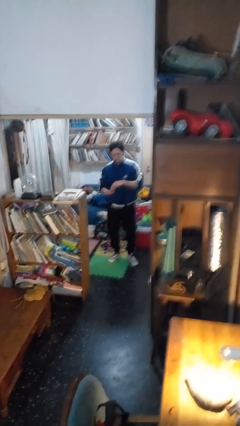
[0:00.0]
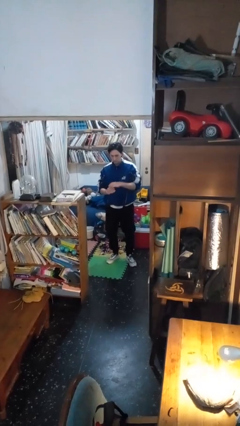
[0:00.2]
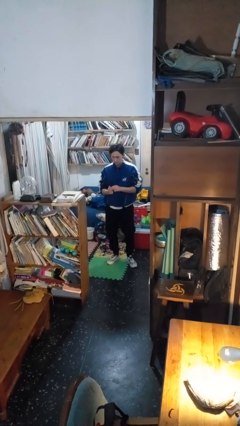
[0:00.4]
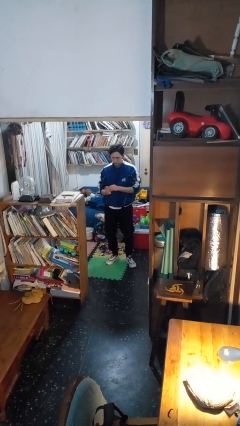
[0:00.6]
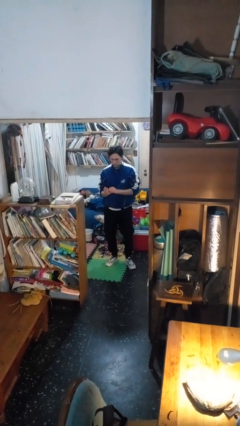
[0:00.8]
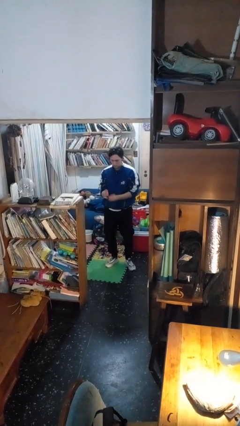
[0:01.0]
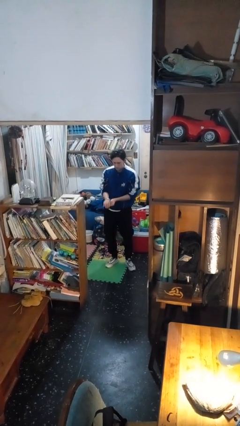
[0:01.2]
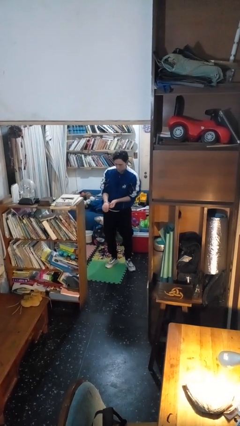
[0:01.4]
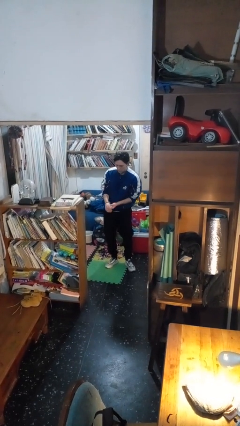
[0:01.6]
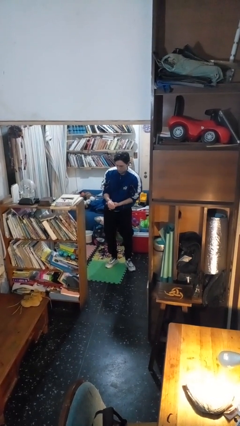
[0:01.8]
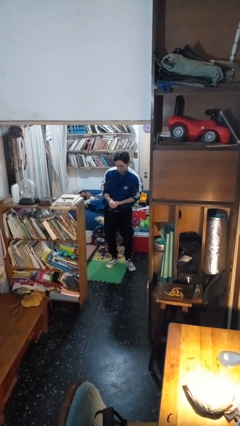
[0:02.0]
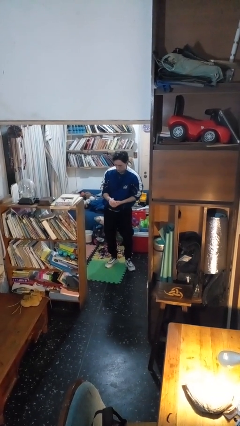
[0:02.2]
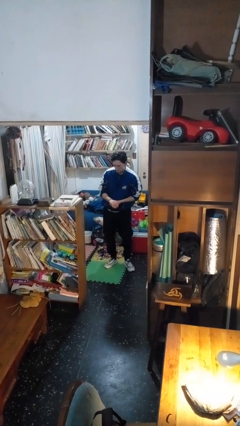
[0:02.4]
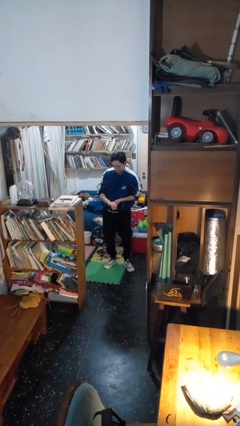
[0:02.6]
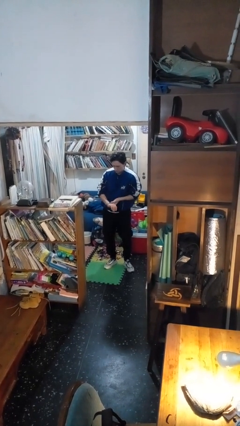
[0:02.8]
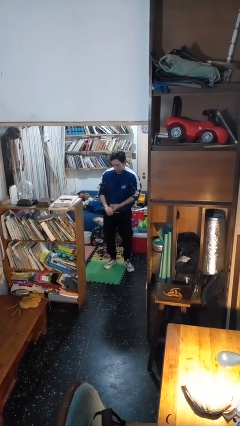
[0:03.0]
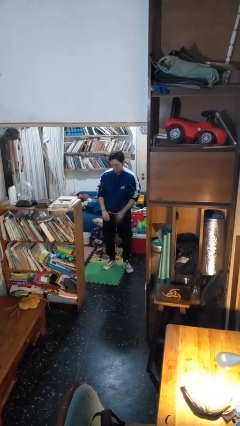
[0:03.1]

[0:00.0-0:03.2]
person puts on wristwatch

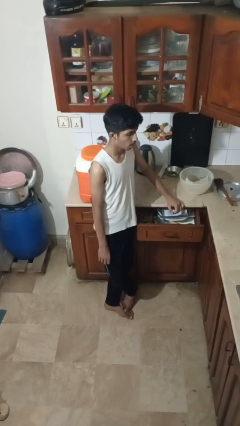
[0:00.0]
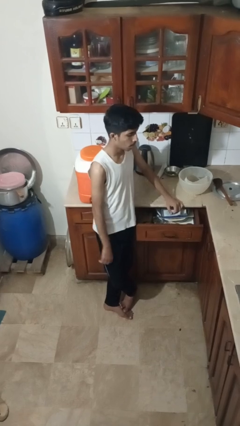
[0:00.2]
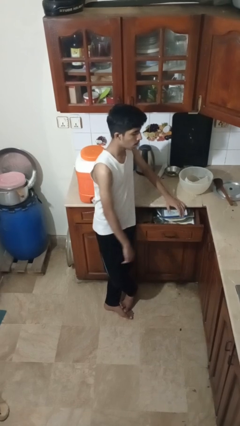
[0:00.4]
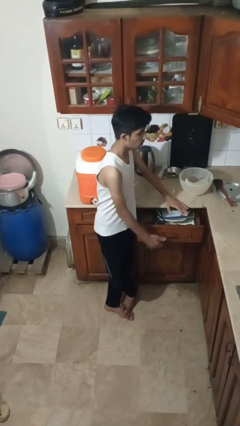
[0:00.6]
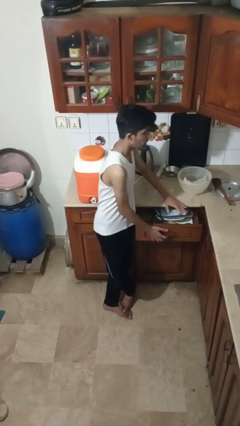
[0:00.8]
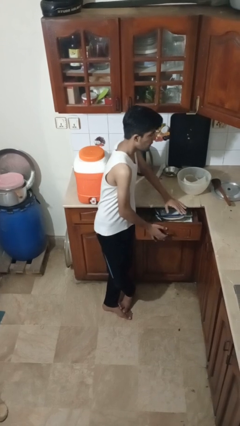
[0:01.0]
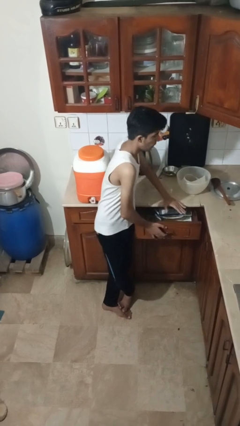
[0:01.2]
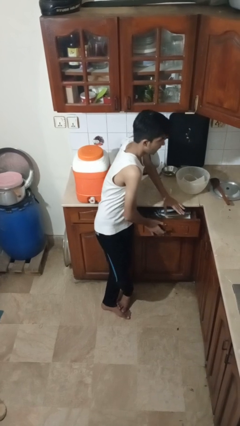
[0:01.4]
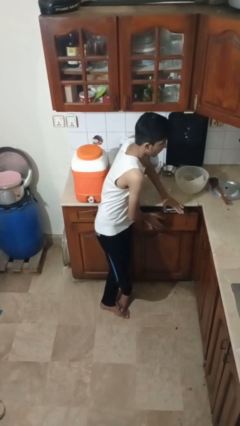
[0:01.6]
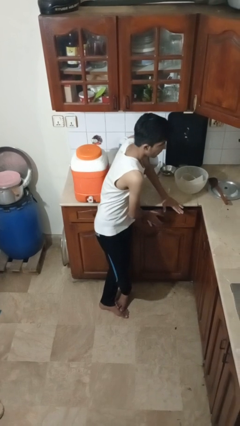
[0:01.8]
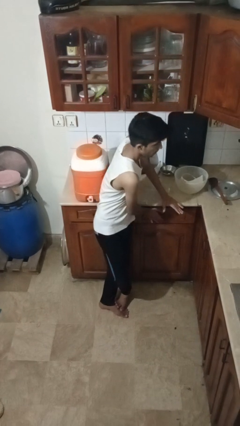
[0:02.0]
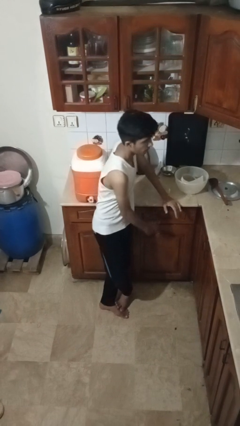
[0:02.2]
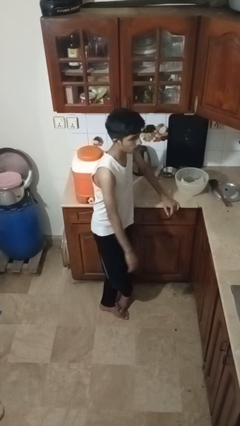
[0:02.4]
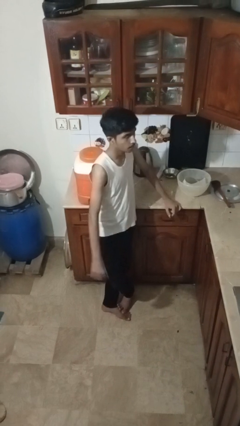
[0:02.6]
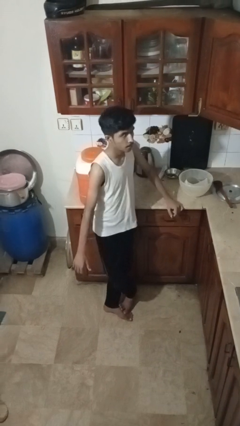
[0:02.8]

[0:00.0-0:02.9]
person closes kitchen drawer

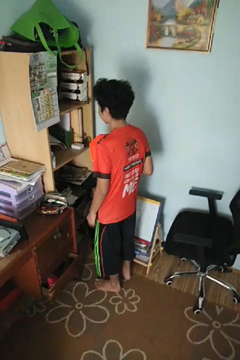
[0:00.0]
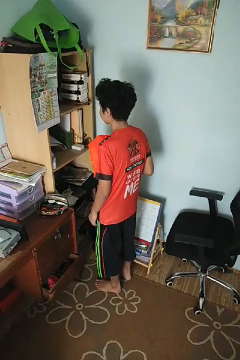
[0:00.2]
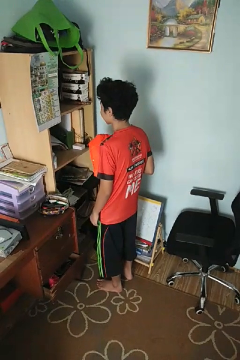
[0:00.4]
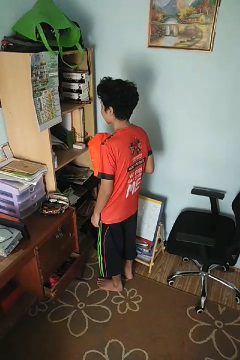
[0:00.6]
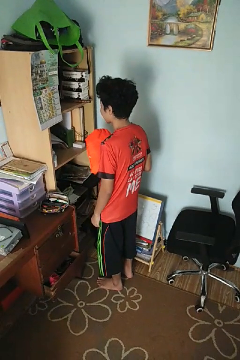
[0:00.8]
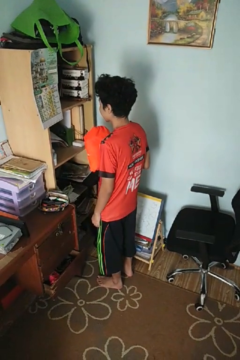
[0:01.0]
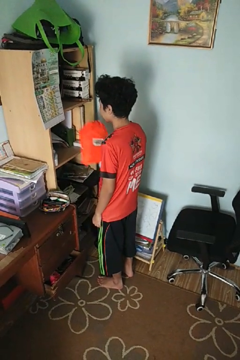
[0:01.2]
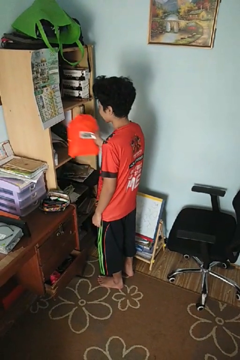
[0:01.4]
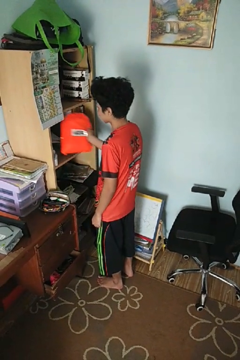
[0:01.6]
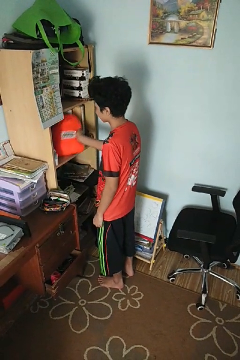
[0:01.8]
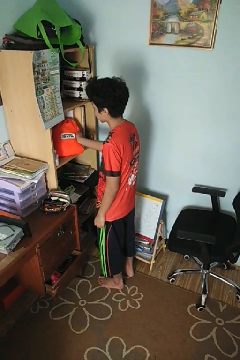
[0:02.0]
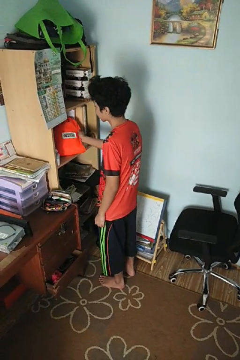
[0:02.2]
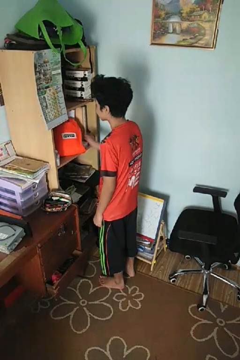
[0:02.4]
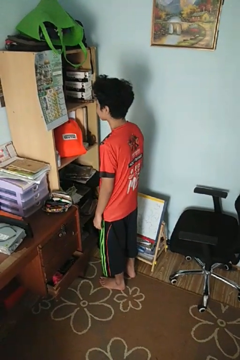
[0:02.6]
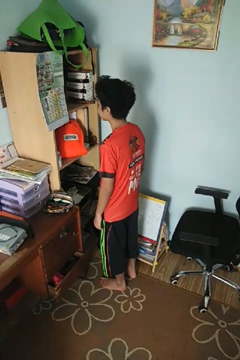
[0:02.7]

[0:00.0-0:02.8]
person puts down object into cabinet

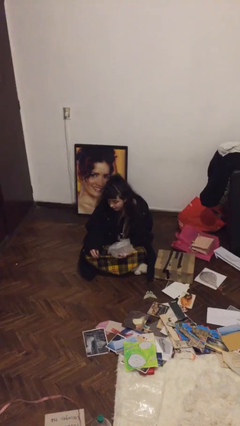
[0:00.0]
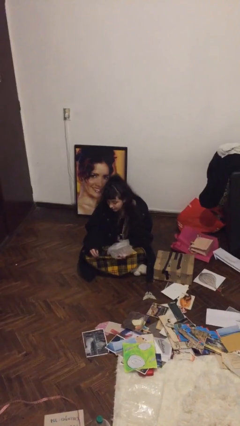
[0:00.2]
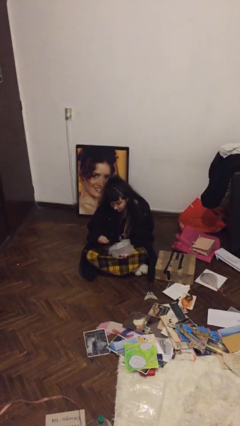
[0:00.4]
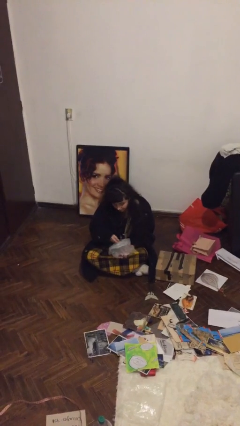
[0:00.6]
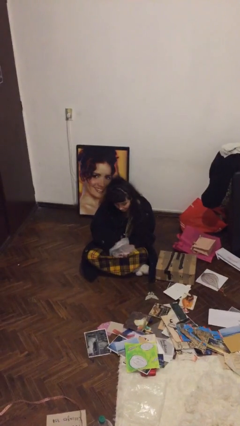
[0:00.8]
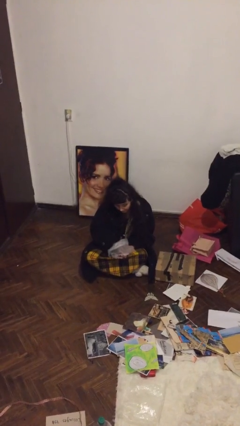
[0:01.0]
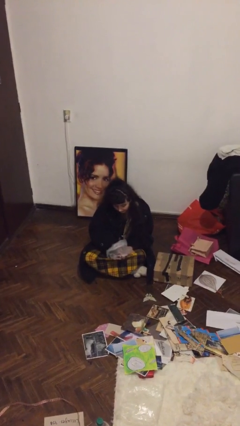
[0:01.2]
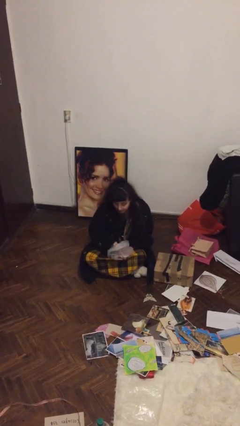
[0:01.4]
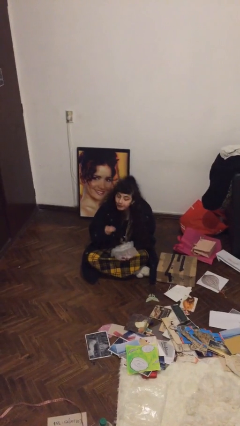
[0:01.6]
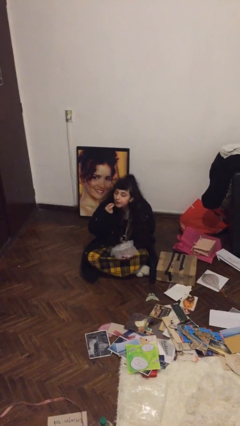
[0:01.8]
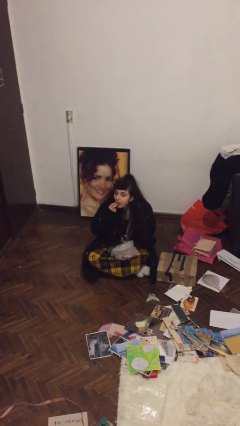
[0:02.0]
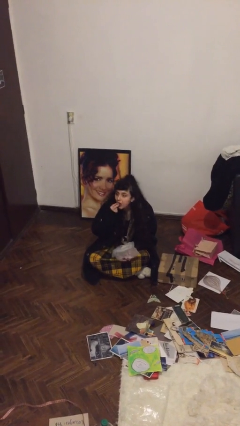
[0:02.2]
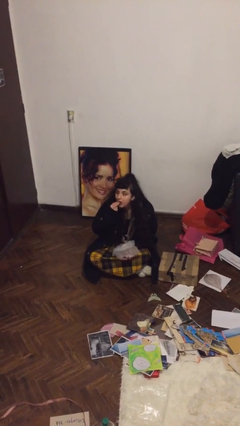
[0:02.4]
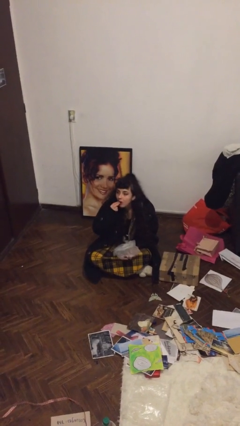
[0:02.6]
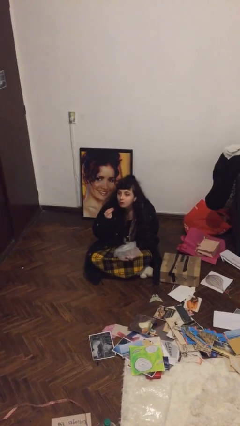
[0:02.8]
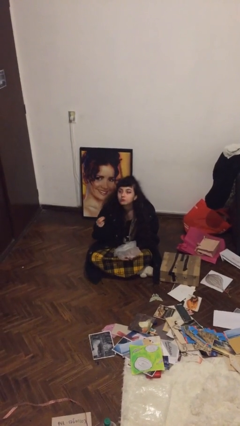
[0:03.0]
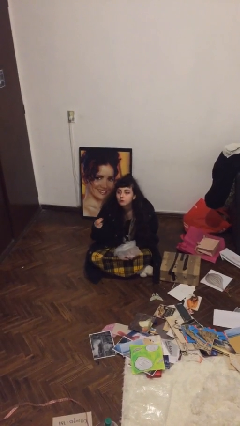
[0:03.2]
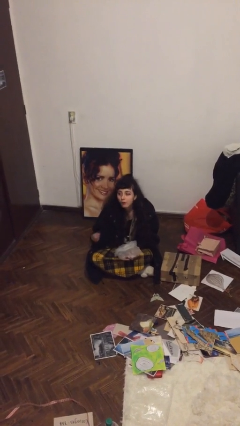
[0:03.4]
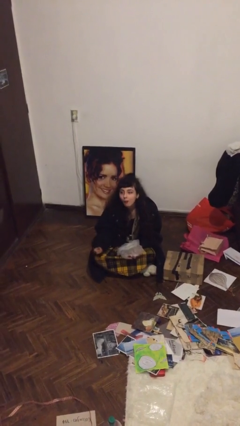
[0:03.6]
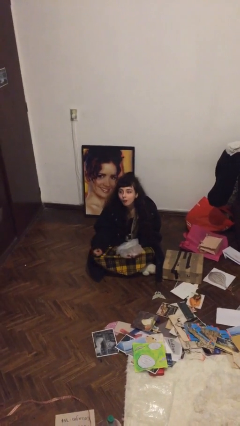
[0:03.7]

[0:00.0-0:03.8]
person eats snack from bag

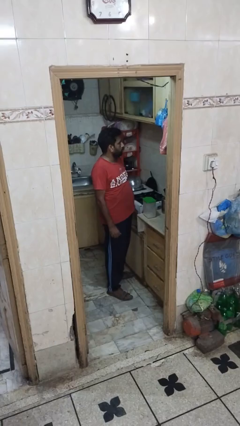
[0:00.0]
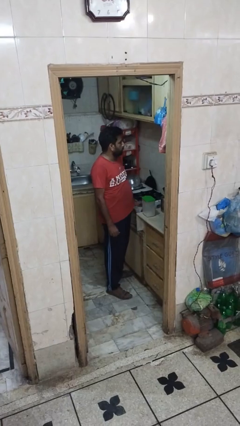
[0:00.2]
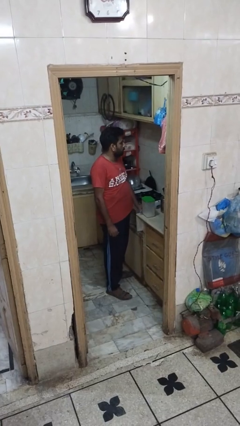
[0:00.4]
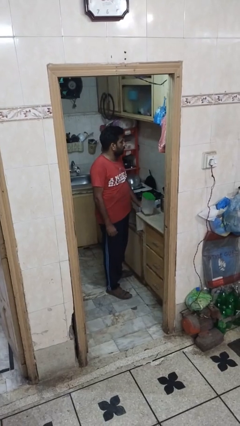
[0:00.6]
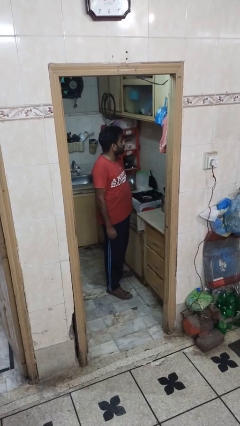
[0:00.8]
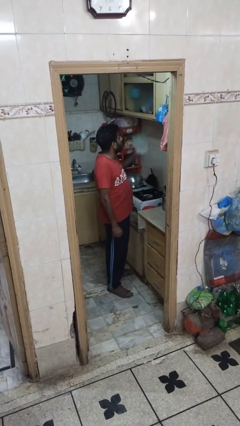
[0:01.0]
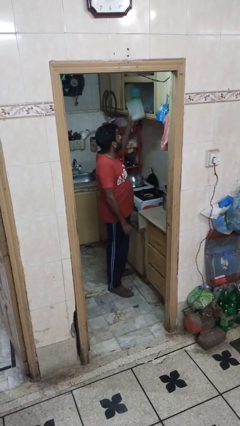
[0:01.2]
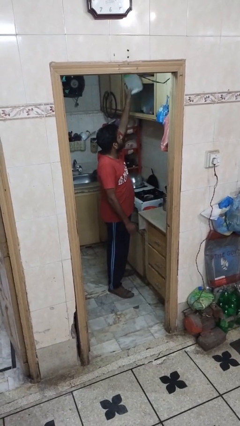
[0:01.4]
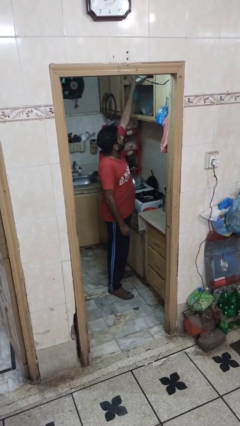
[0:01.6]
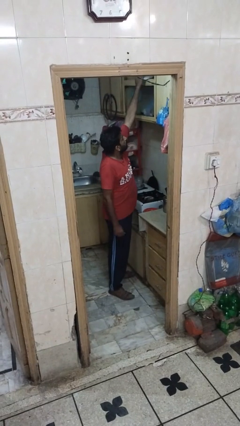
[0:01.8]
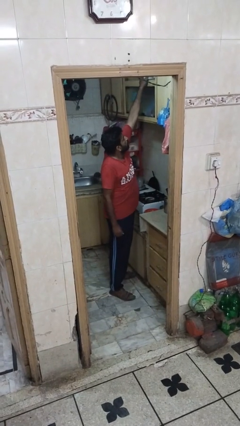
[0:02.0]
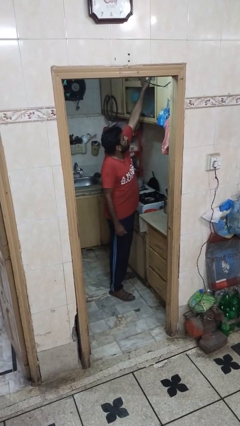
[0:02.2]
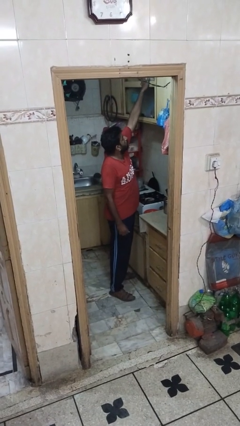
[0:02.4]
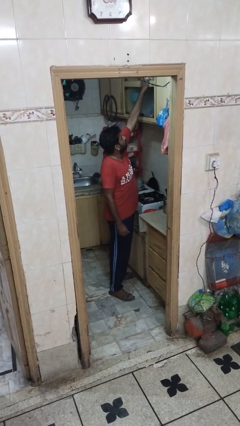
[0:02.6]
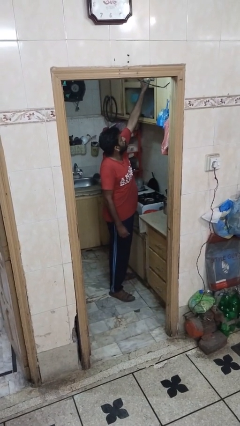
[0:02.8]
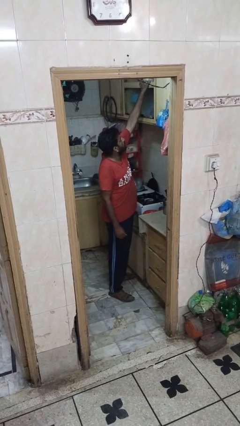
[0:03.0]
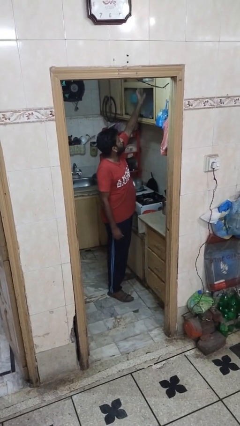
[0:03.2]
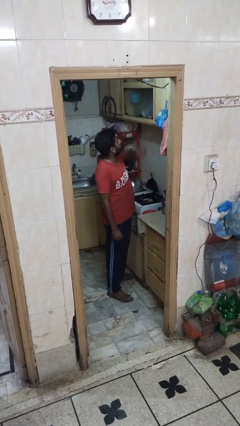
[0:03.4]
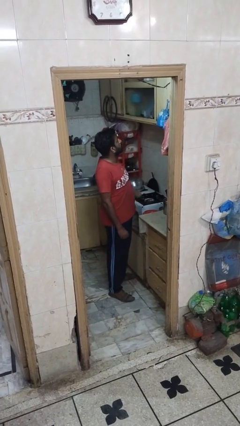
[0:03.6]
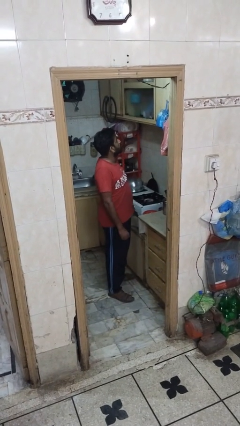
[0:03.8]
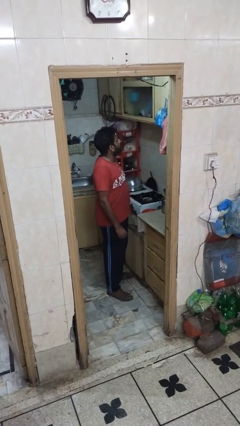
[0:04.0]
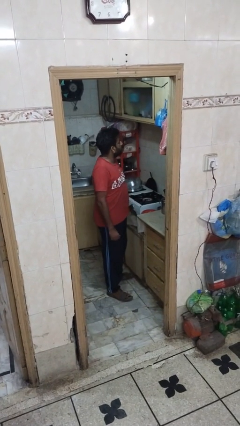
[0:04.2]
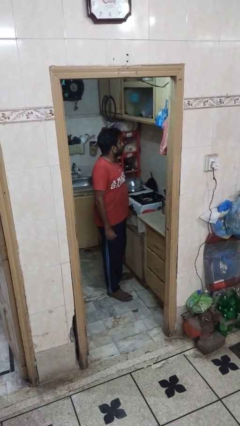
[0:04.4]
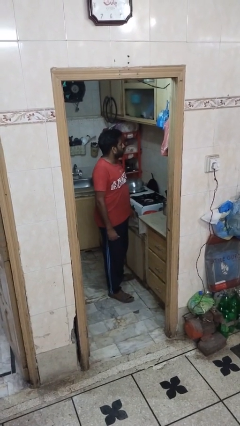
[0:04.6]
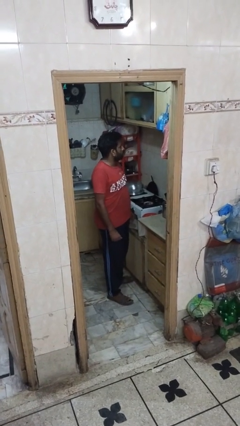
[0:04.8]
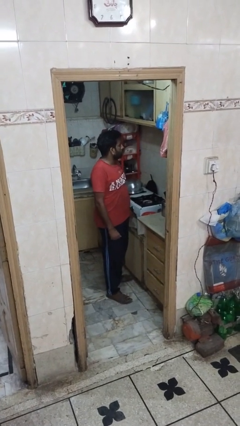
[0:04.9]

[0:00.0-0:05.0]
person picks up object from shelf

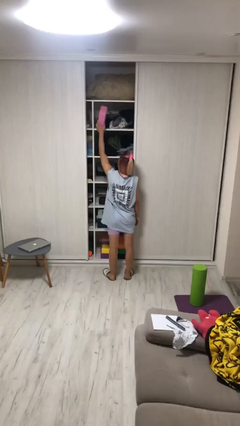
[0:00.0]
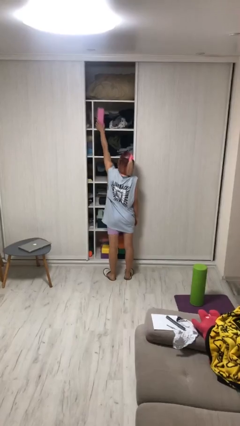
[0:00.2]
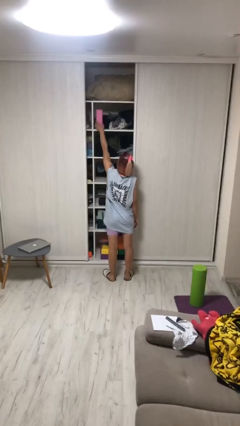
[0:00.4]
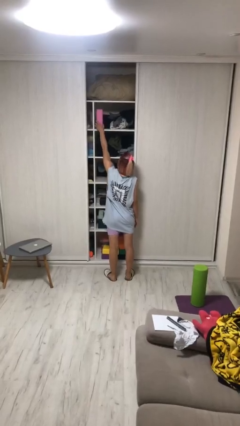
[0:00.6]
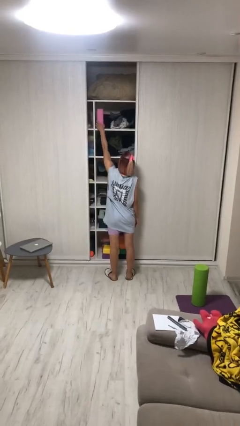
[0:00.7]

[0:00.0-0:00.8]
person puts down object on shelf
